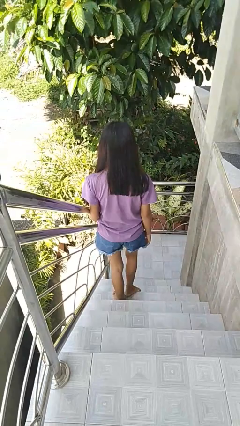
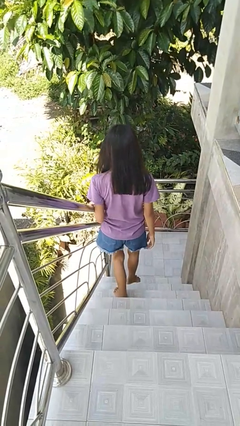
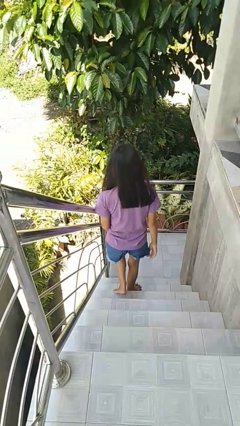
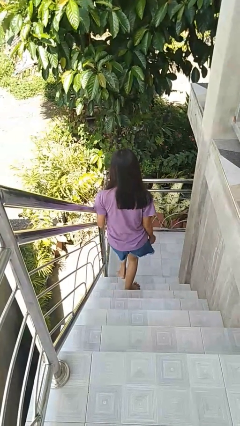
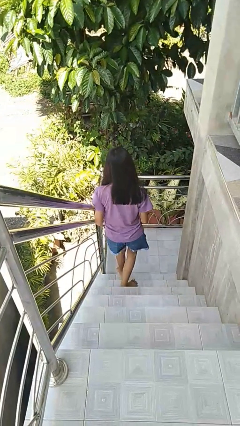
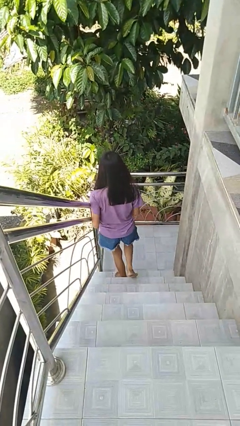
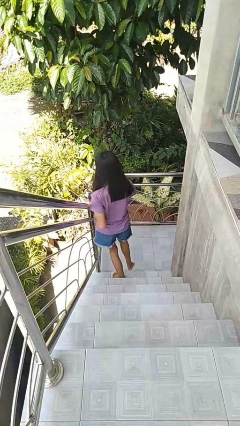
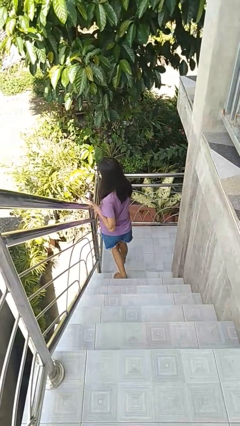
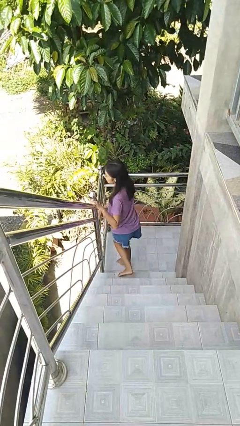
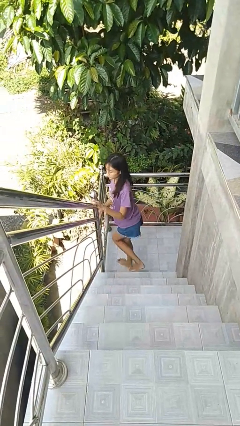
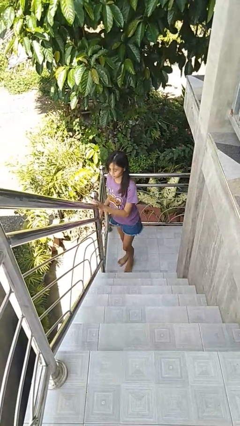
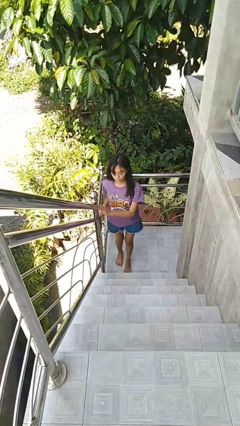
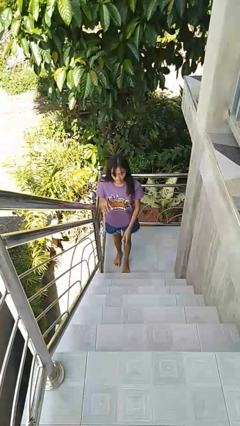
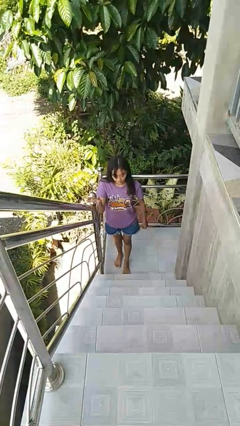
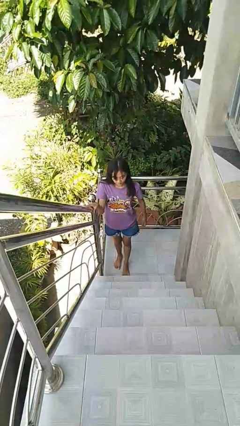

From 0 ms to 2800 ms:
person climbs down stairs

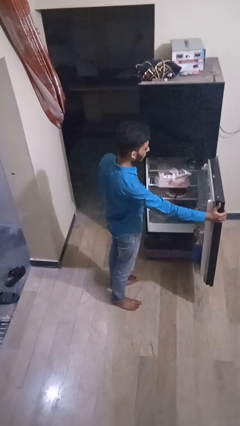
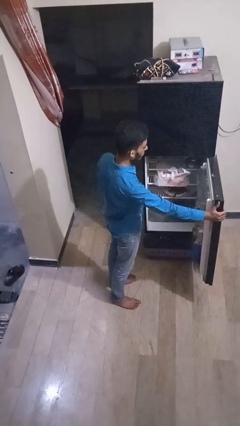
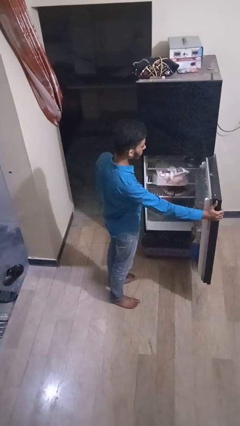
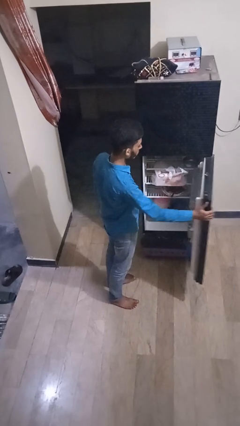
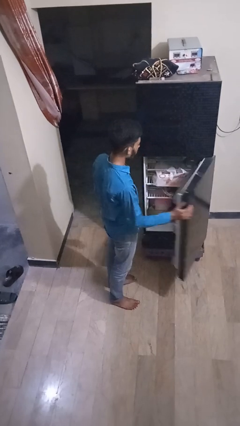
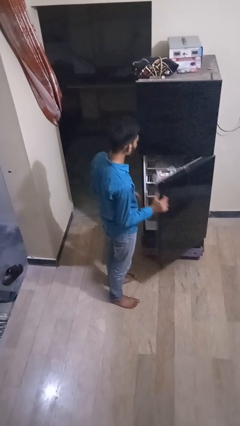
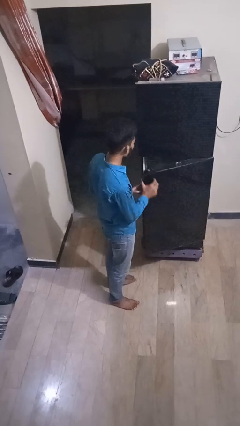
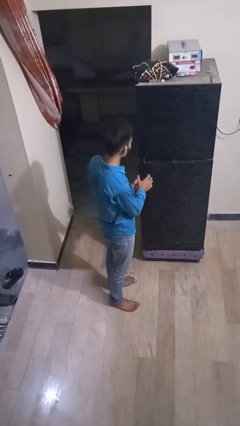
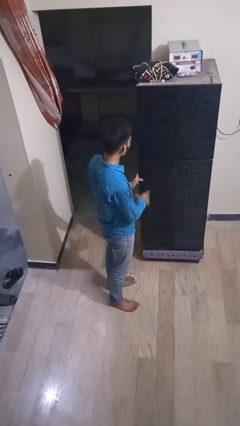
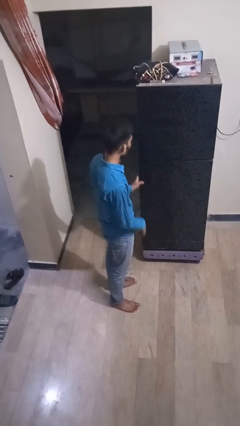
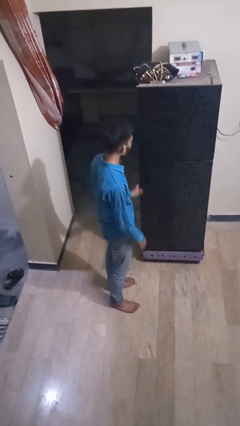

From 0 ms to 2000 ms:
person closes refrigerator

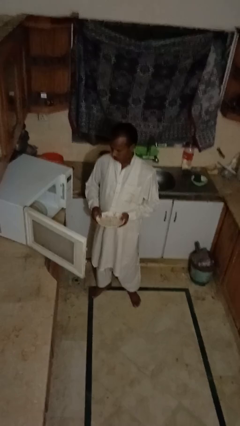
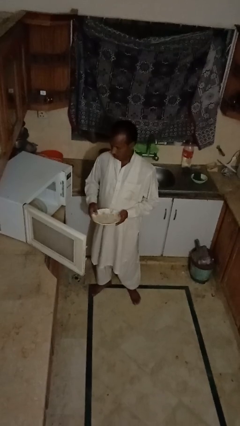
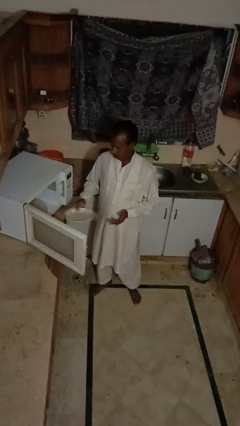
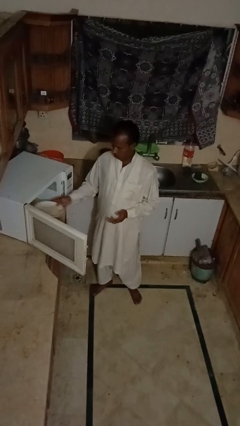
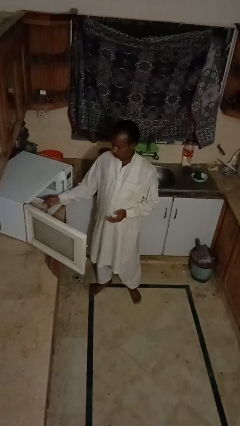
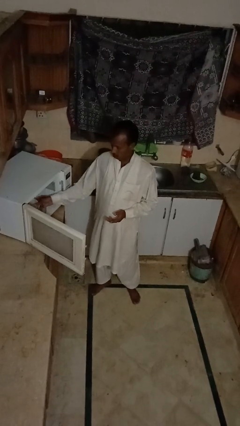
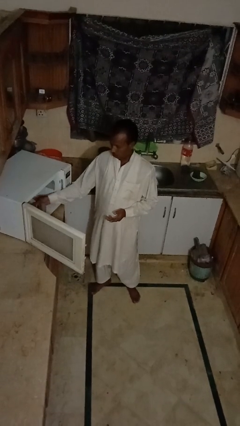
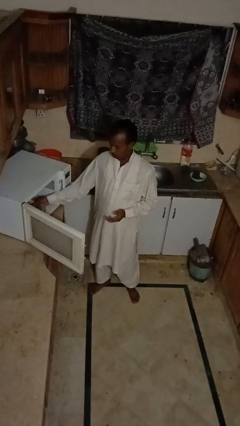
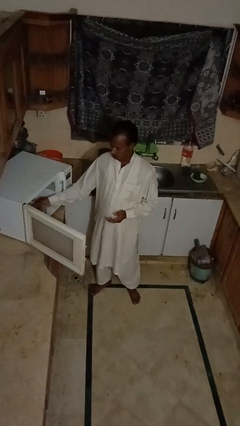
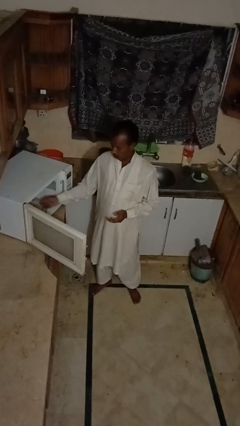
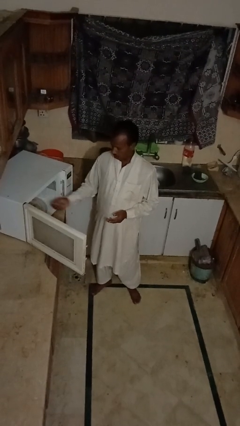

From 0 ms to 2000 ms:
person puts object into microwave

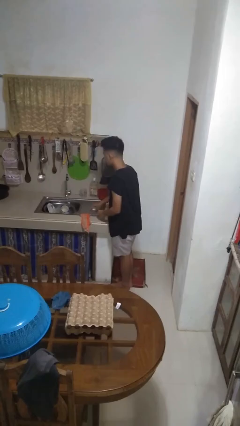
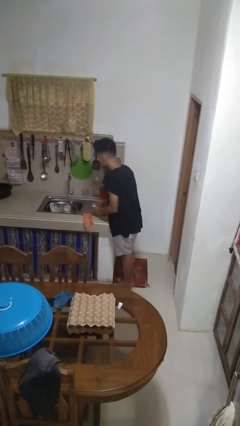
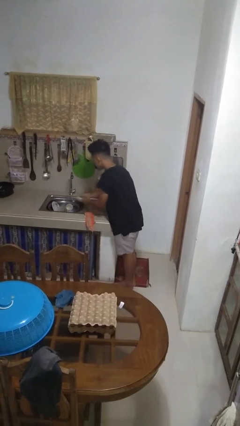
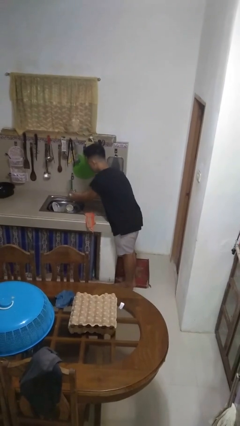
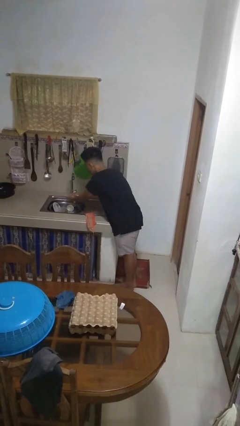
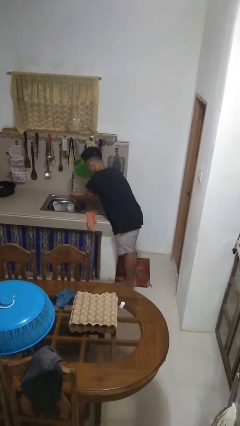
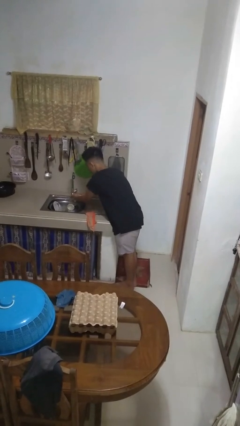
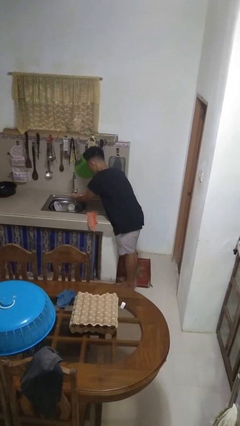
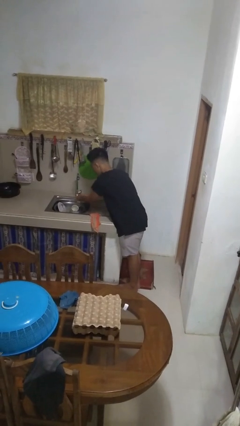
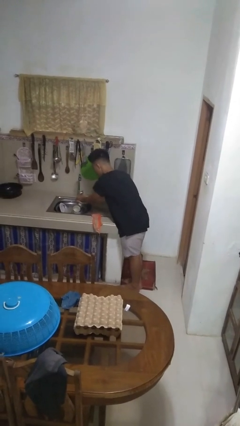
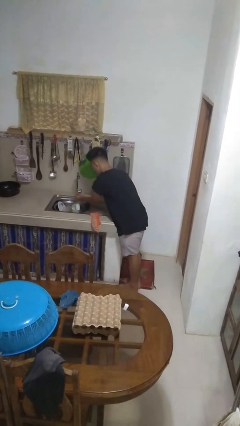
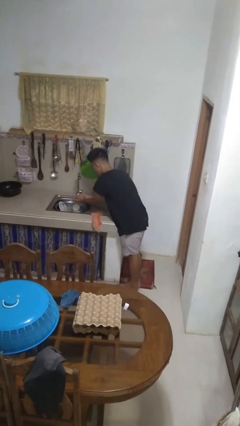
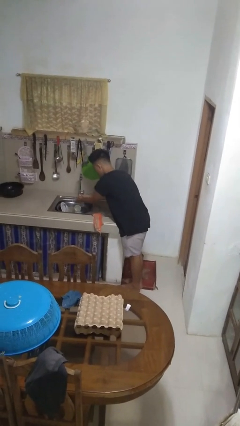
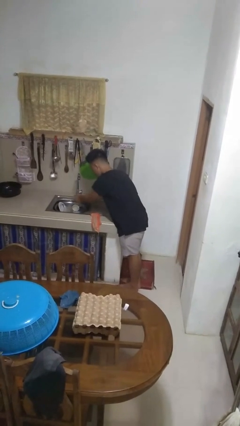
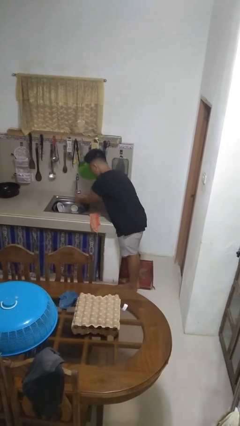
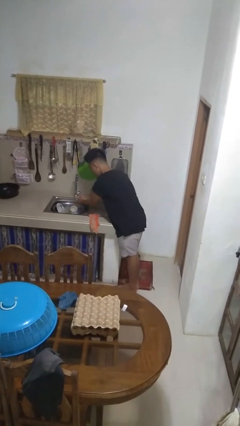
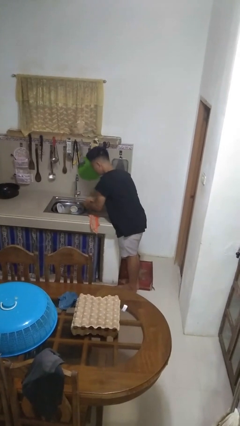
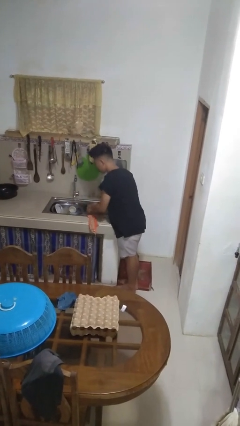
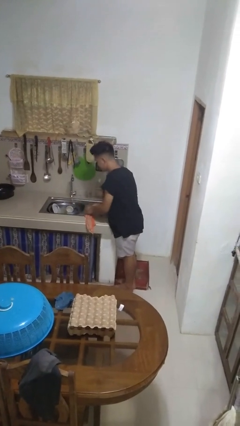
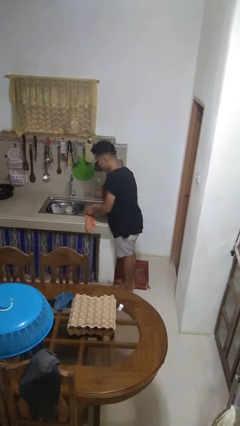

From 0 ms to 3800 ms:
person washes hands

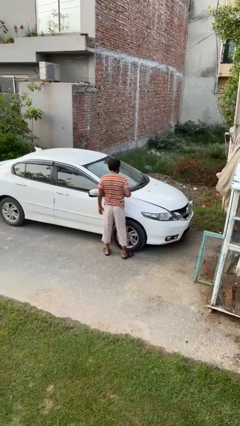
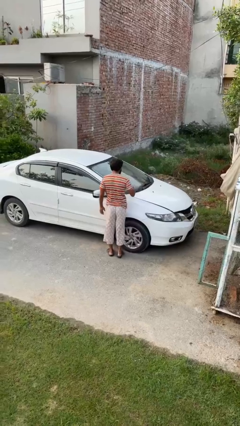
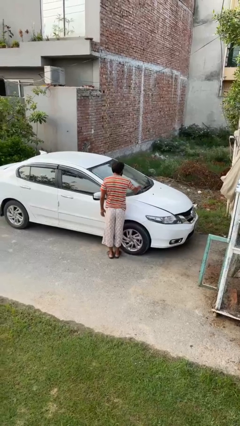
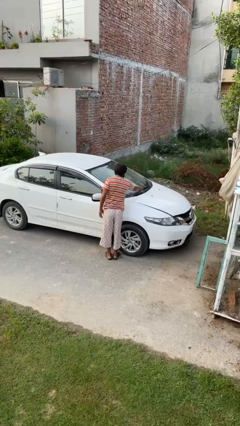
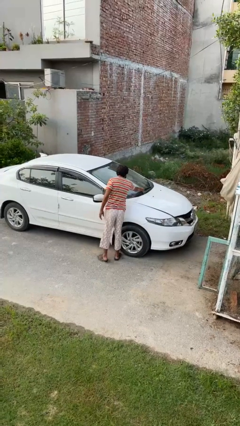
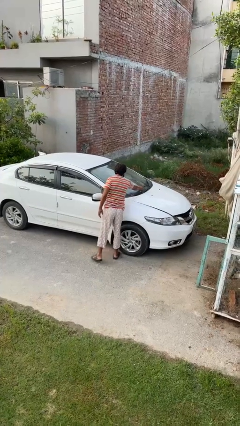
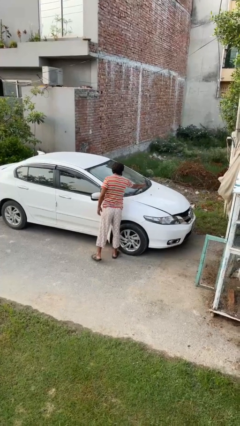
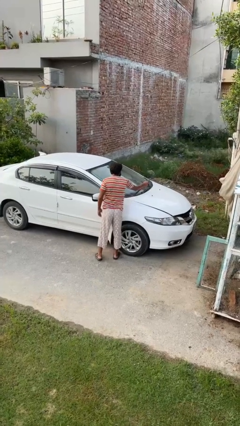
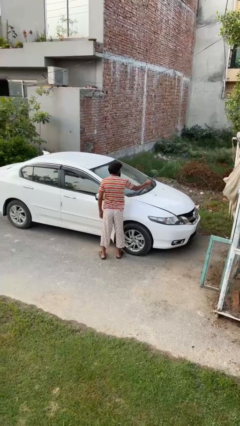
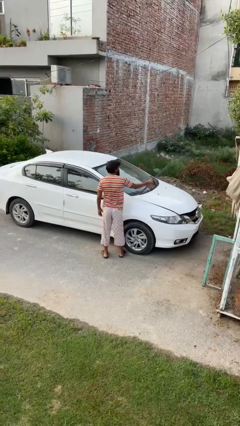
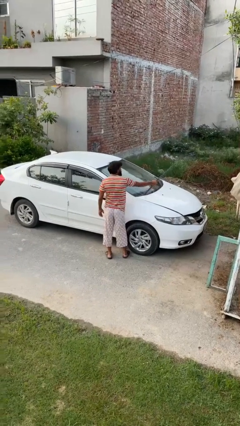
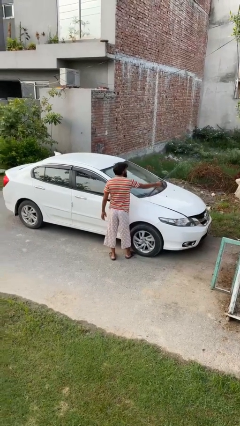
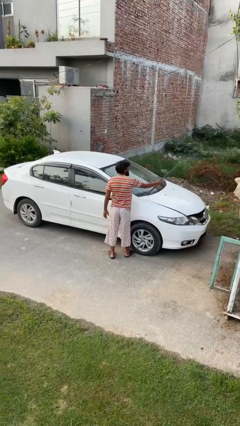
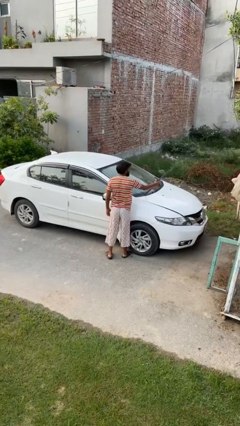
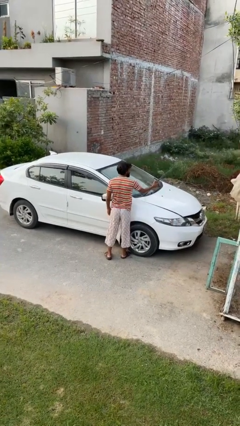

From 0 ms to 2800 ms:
person flips up car wipers

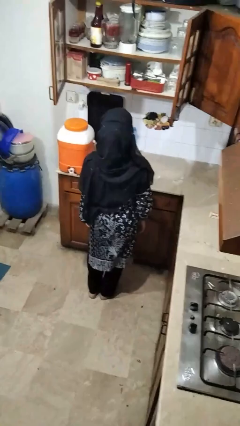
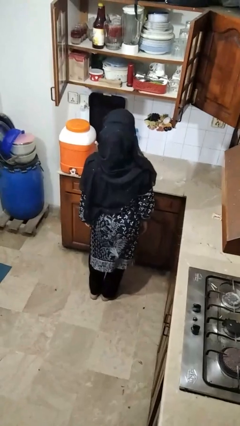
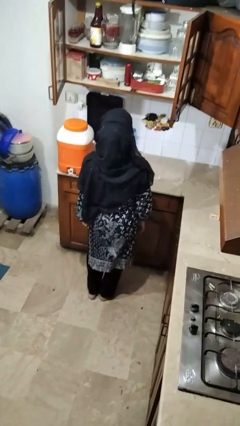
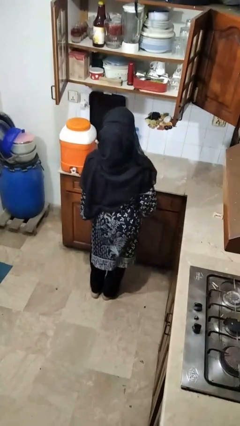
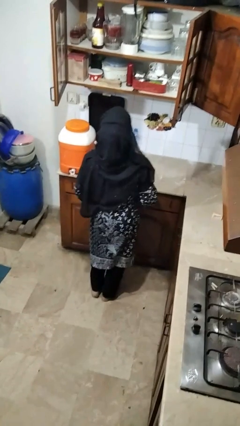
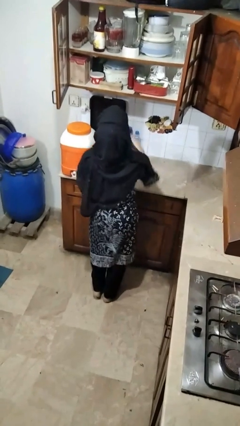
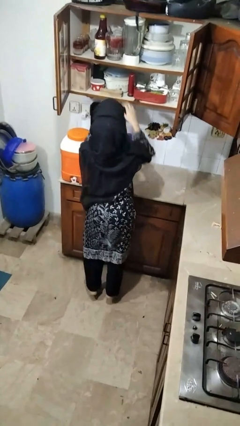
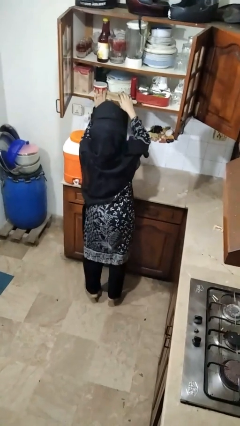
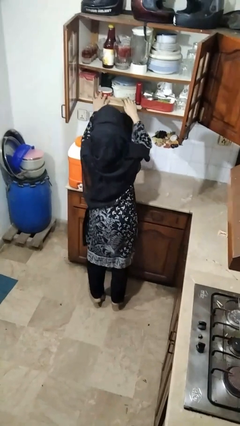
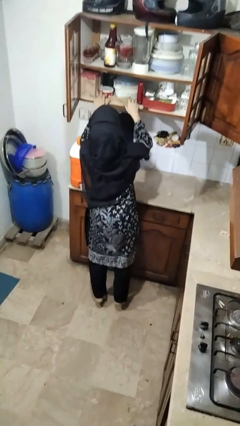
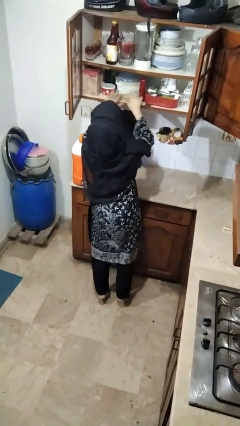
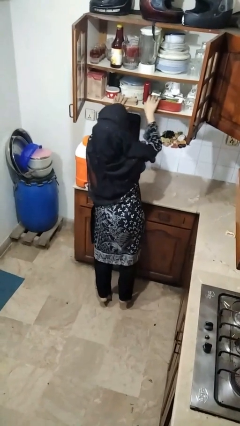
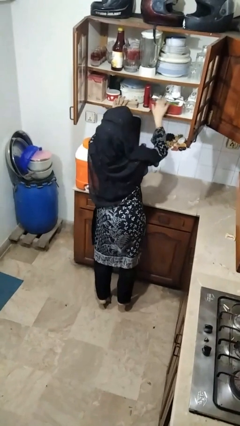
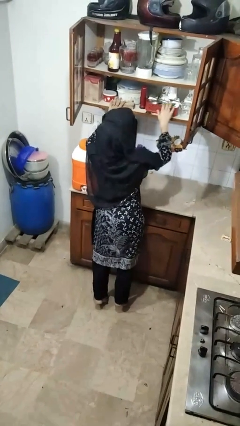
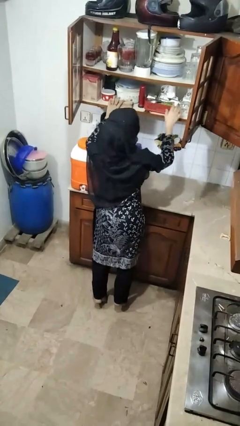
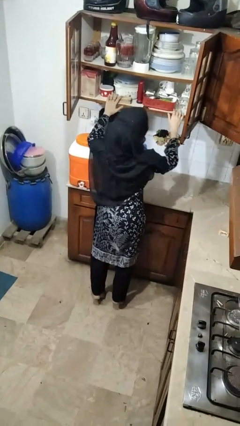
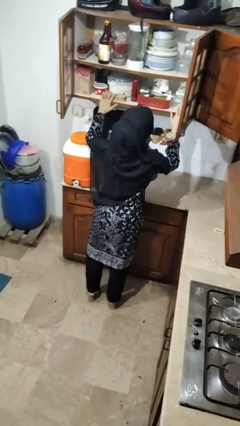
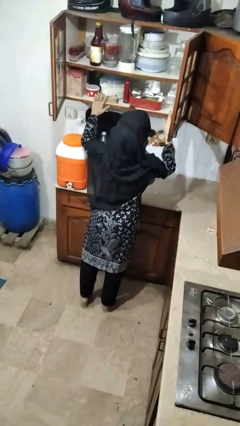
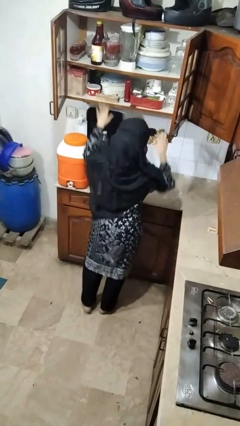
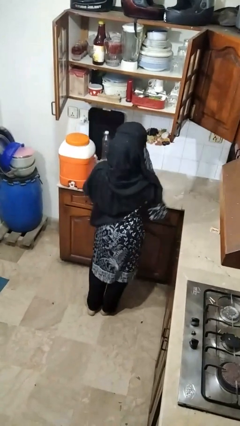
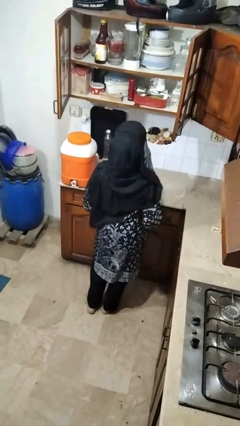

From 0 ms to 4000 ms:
person searches in cabinet
